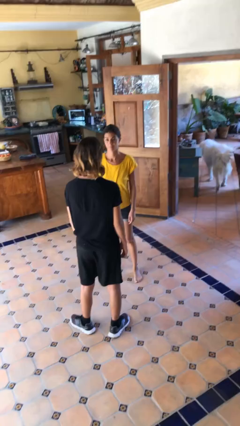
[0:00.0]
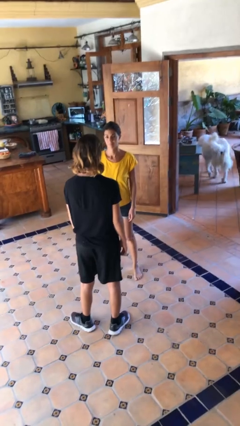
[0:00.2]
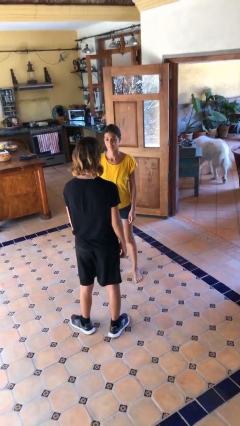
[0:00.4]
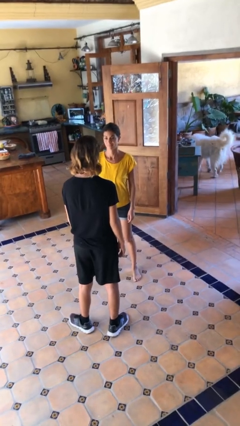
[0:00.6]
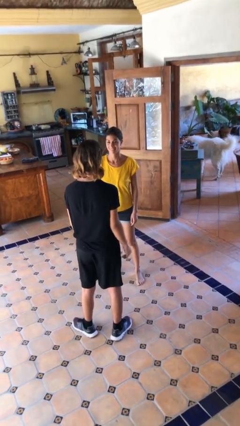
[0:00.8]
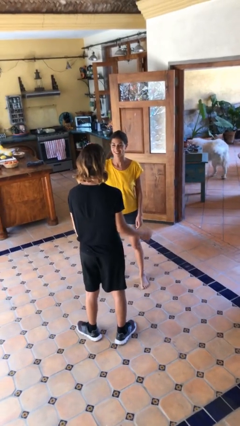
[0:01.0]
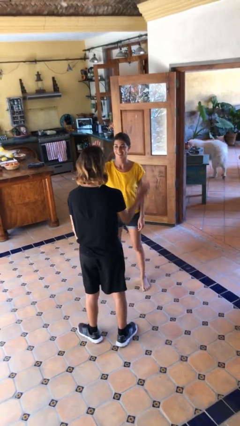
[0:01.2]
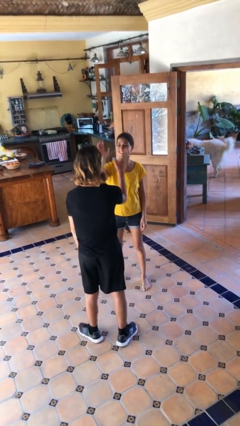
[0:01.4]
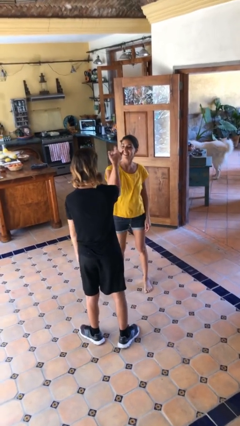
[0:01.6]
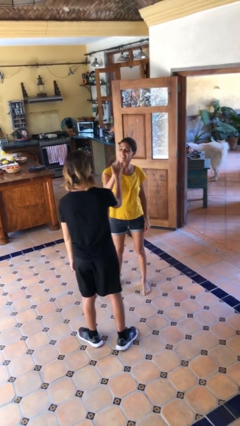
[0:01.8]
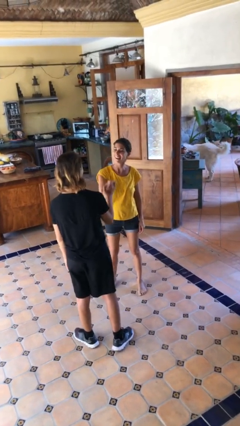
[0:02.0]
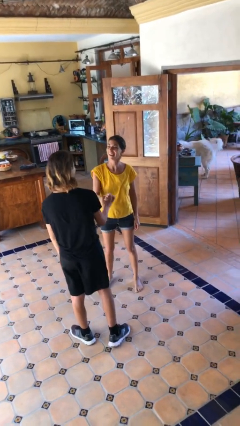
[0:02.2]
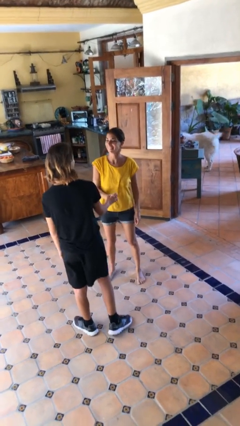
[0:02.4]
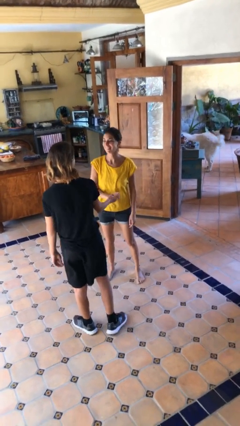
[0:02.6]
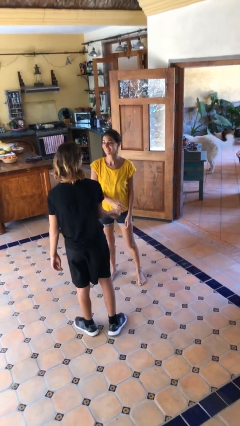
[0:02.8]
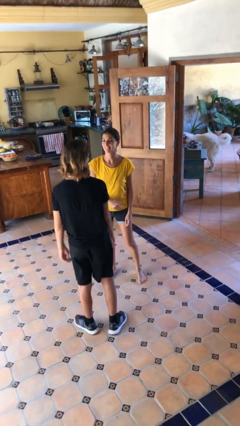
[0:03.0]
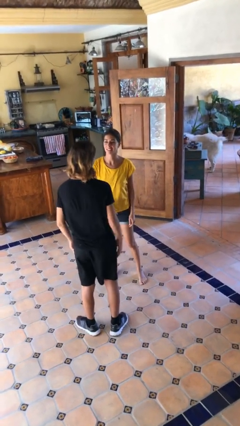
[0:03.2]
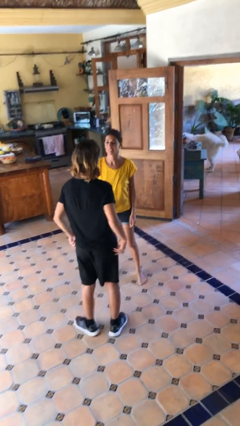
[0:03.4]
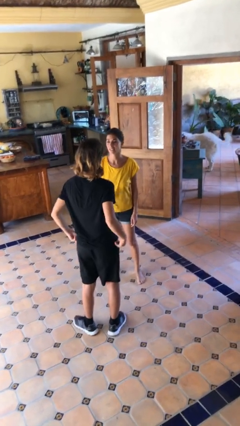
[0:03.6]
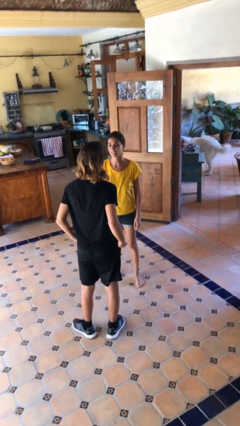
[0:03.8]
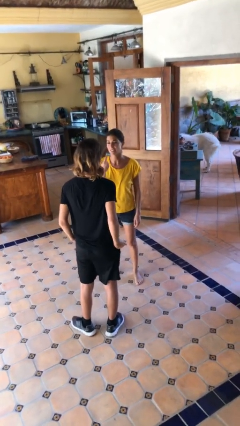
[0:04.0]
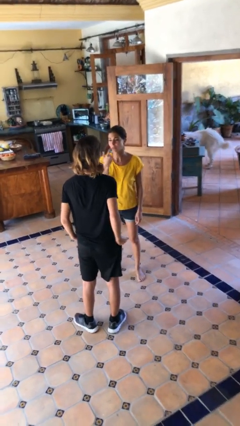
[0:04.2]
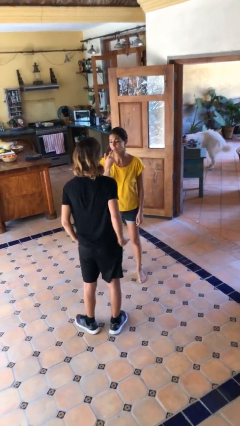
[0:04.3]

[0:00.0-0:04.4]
person highfives hand

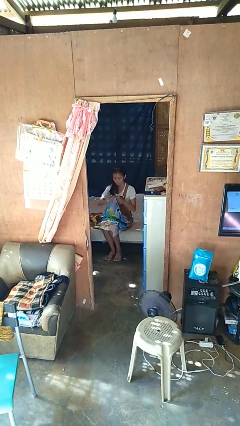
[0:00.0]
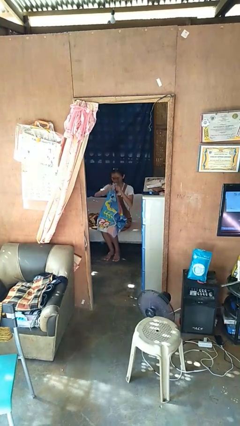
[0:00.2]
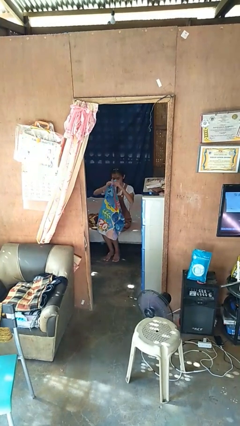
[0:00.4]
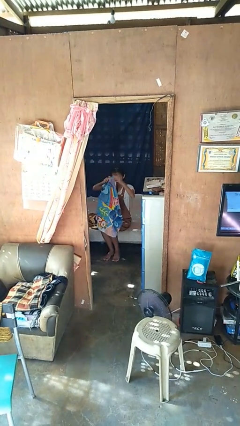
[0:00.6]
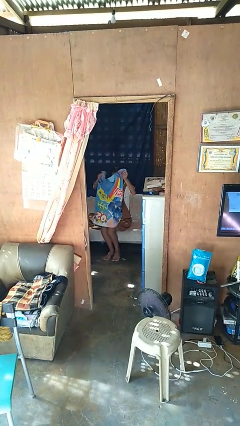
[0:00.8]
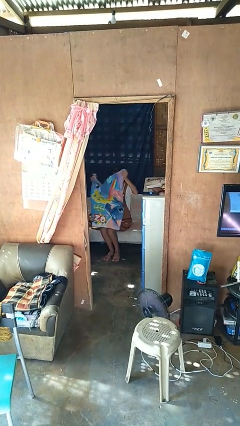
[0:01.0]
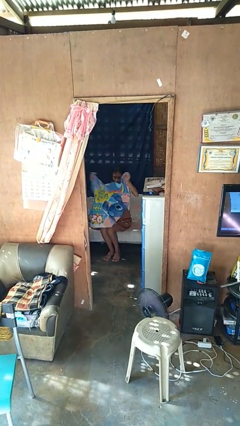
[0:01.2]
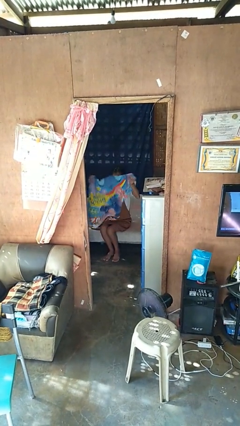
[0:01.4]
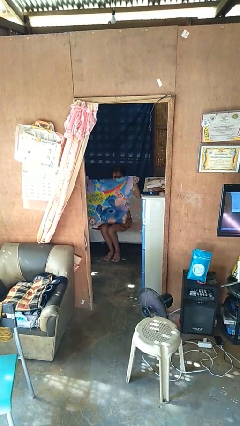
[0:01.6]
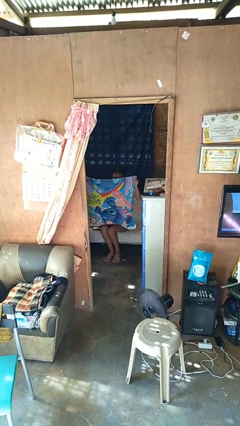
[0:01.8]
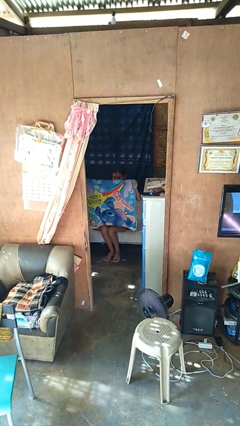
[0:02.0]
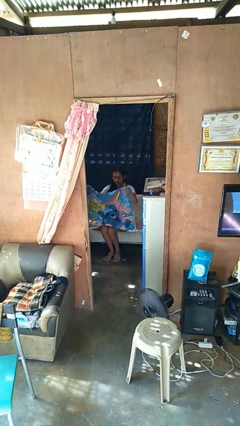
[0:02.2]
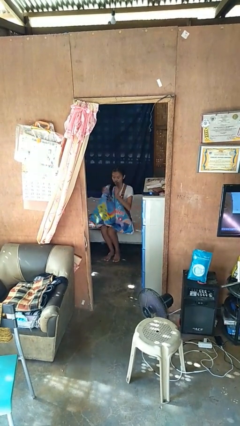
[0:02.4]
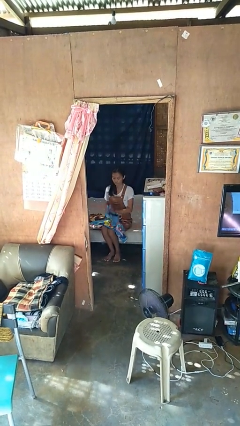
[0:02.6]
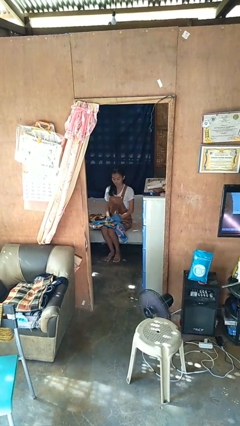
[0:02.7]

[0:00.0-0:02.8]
person unfolds blanket

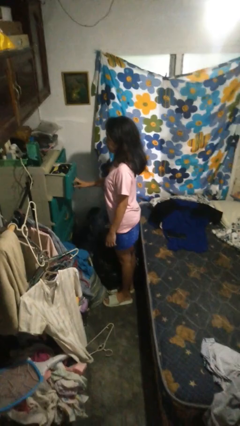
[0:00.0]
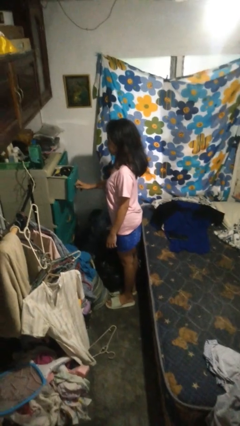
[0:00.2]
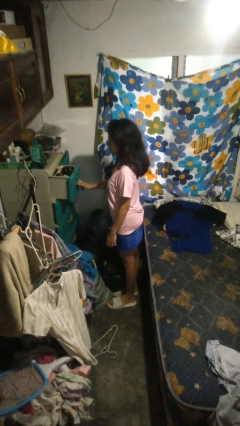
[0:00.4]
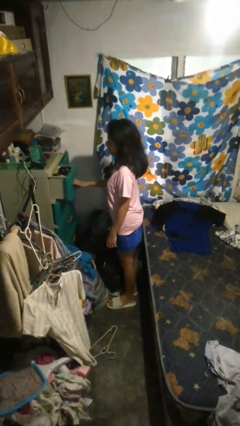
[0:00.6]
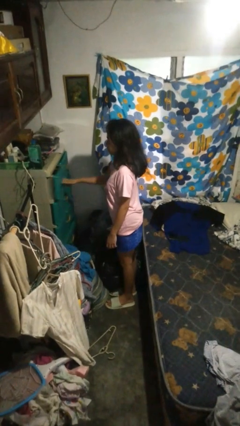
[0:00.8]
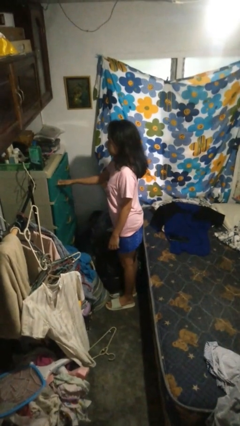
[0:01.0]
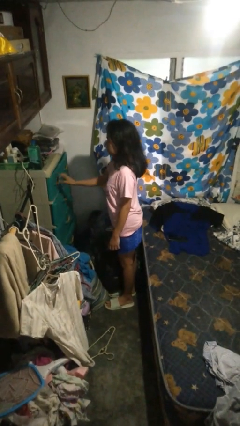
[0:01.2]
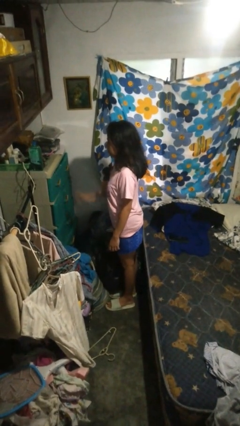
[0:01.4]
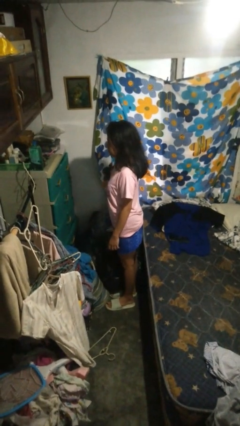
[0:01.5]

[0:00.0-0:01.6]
person closes dresser drawer

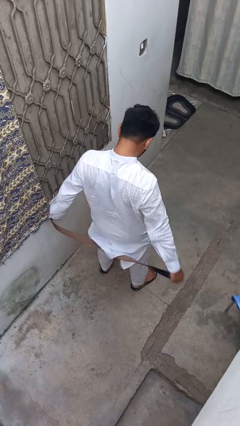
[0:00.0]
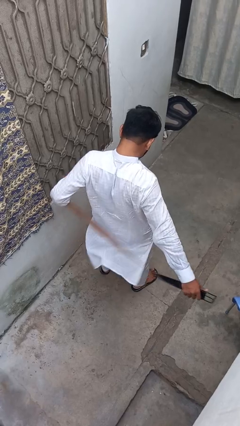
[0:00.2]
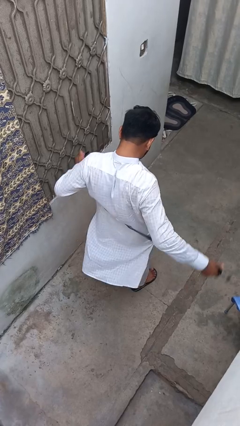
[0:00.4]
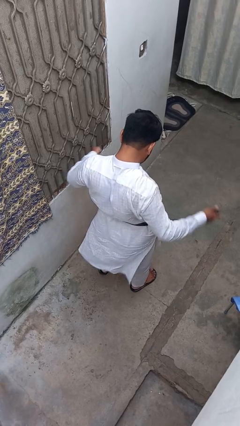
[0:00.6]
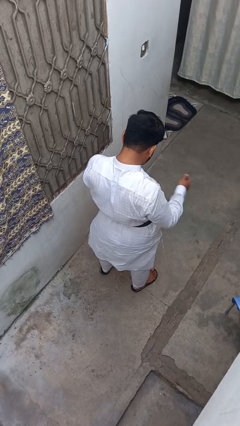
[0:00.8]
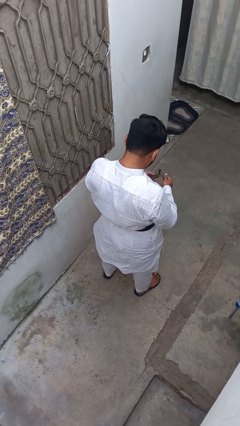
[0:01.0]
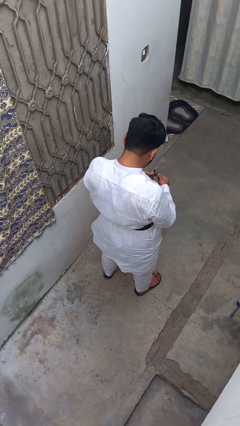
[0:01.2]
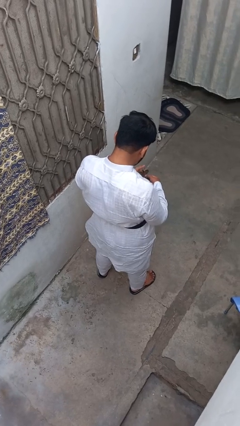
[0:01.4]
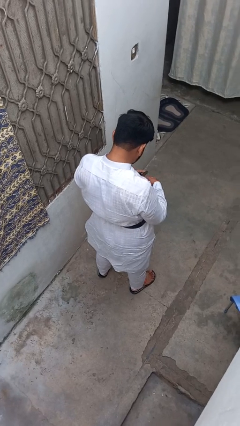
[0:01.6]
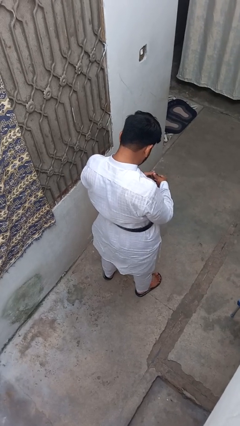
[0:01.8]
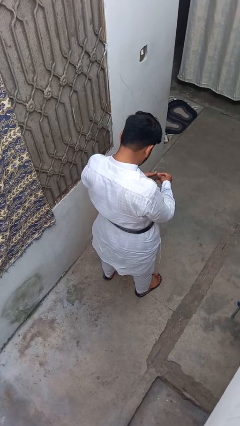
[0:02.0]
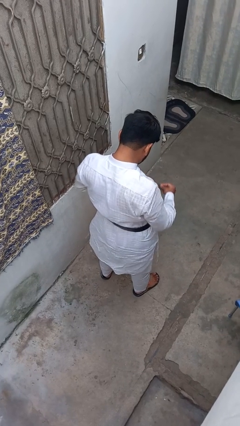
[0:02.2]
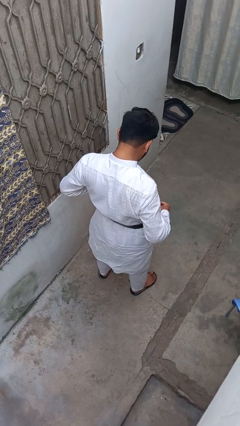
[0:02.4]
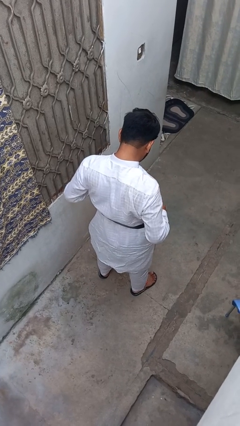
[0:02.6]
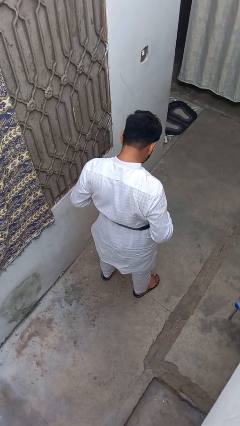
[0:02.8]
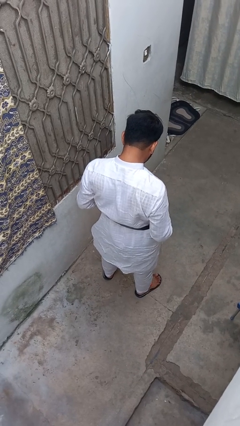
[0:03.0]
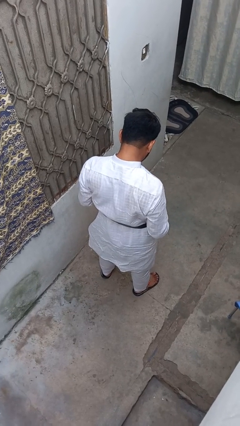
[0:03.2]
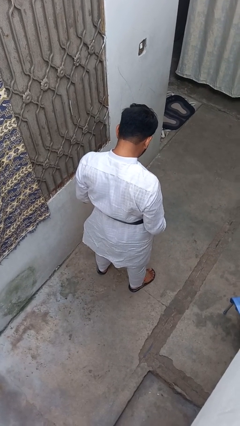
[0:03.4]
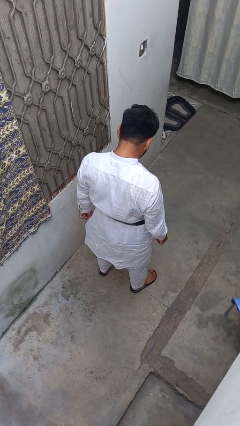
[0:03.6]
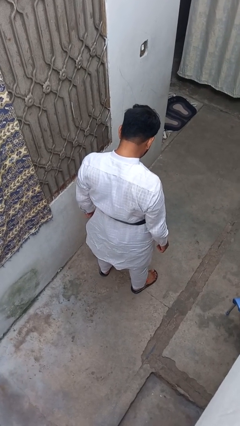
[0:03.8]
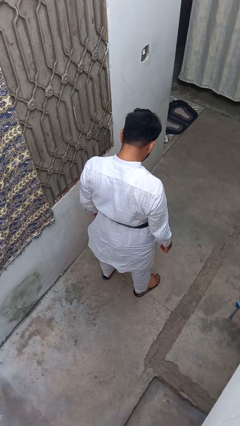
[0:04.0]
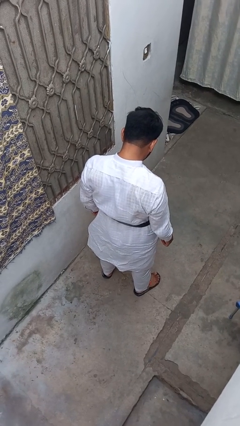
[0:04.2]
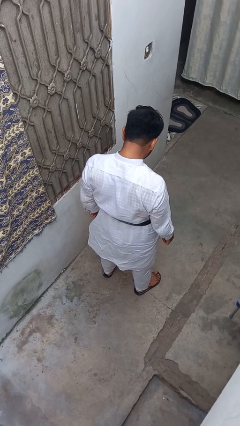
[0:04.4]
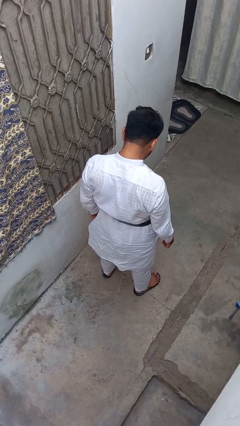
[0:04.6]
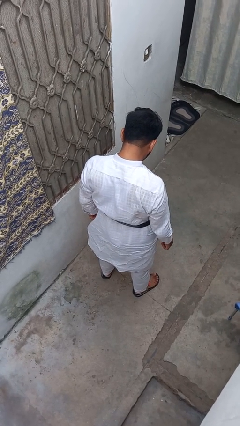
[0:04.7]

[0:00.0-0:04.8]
person puts on belt

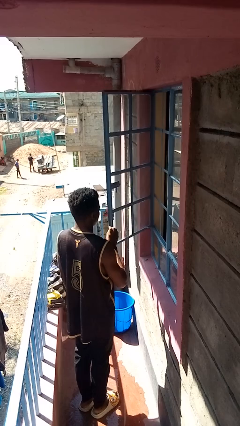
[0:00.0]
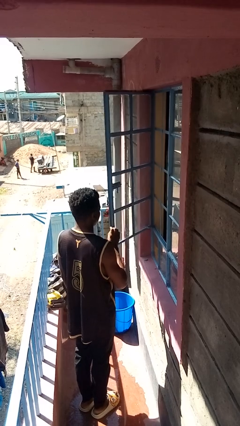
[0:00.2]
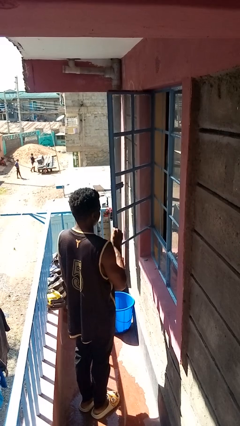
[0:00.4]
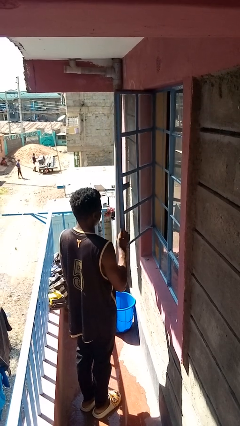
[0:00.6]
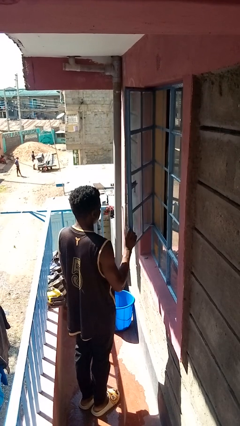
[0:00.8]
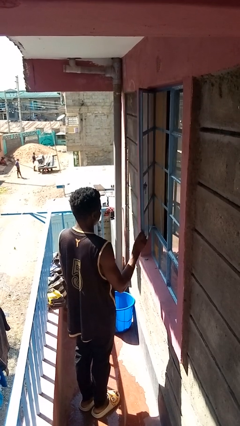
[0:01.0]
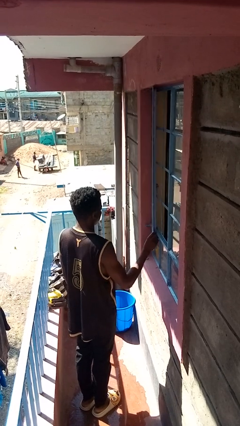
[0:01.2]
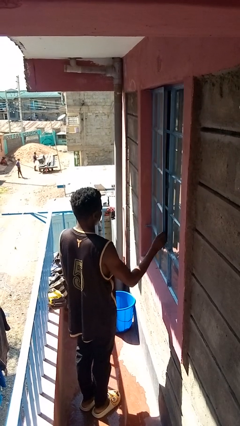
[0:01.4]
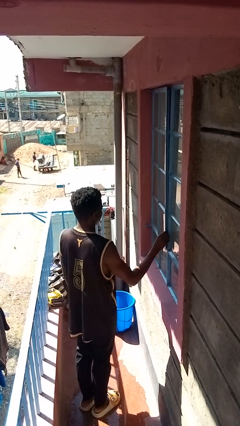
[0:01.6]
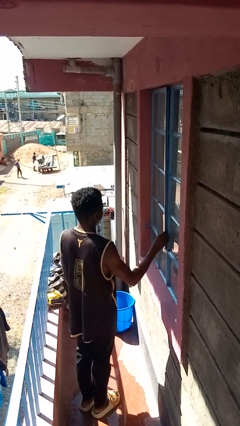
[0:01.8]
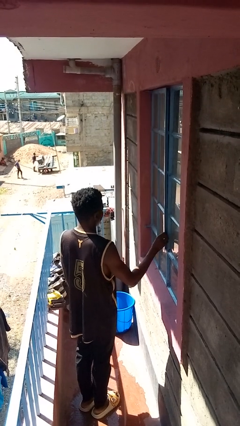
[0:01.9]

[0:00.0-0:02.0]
person closes home window

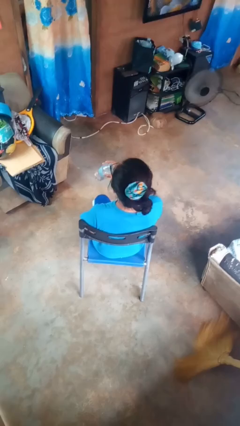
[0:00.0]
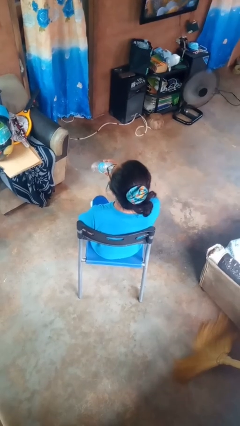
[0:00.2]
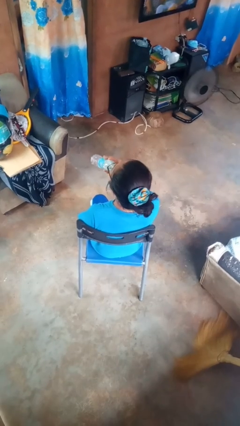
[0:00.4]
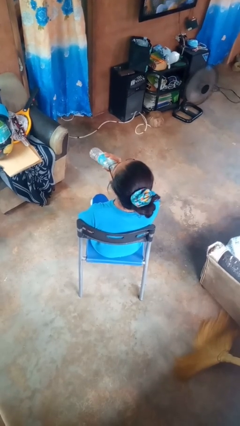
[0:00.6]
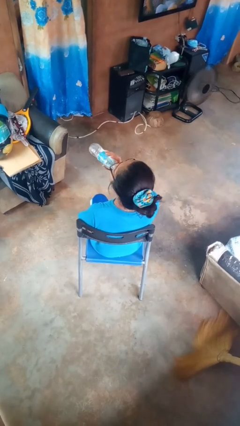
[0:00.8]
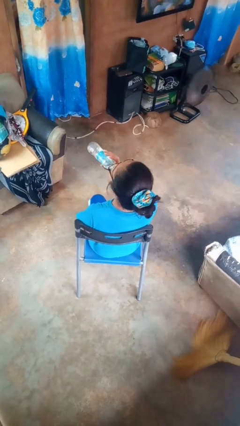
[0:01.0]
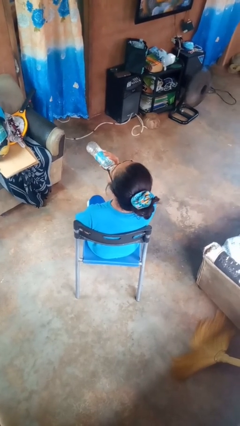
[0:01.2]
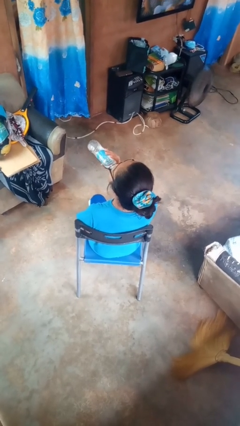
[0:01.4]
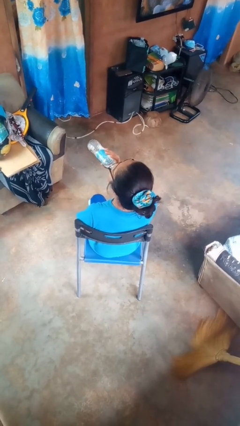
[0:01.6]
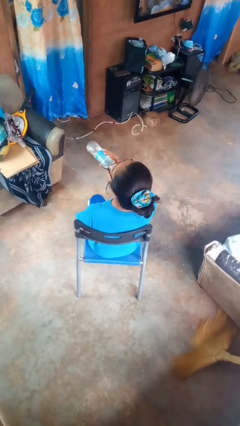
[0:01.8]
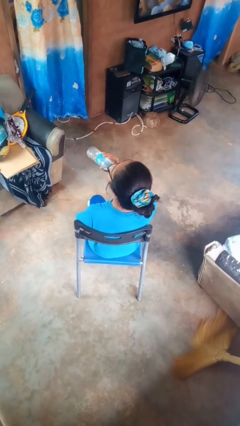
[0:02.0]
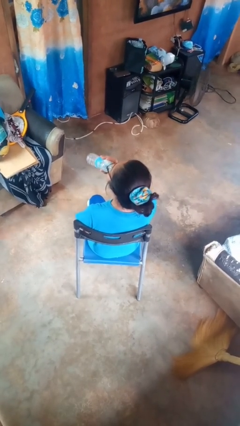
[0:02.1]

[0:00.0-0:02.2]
person drinks from bottle
